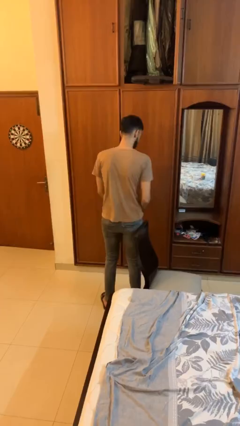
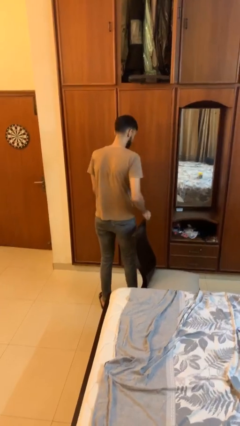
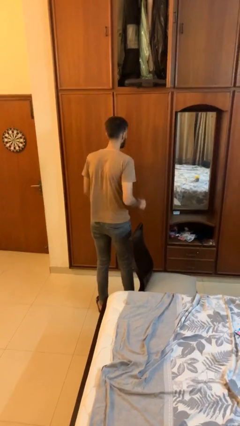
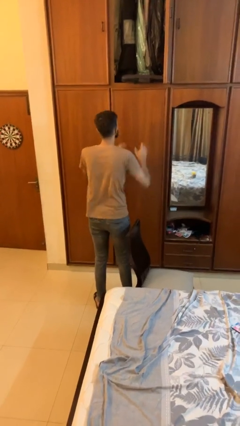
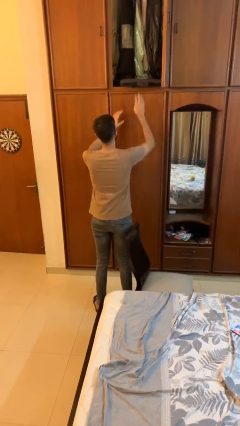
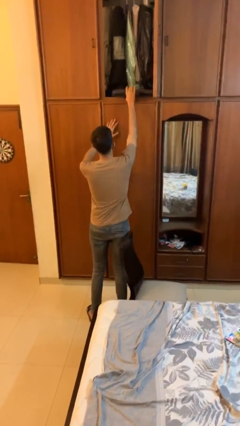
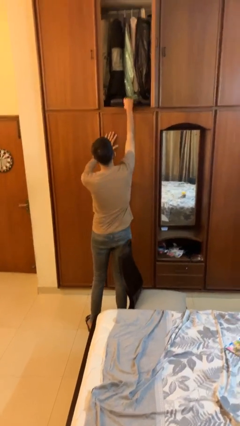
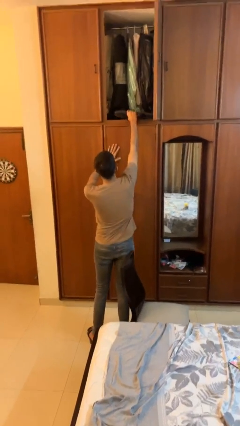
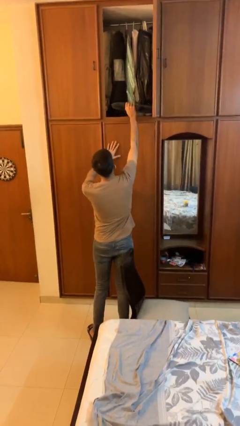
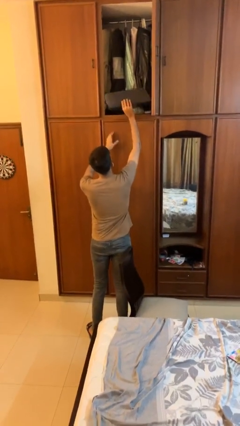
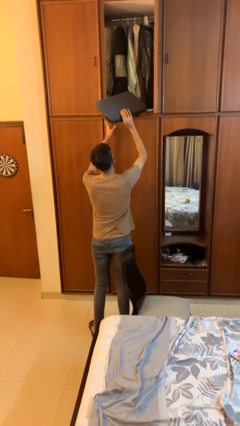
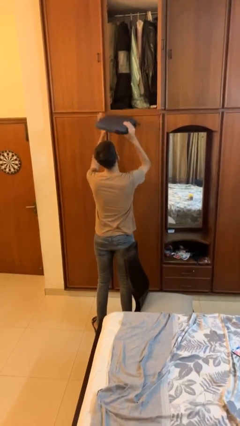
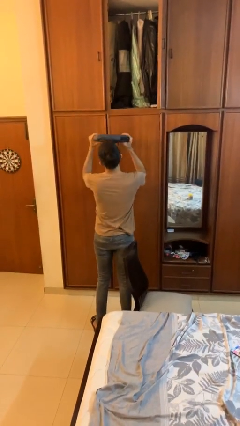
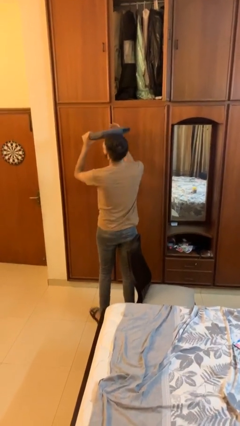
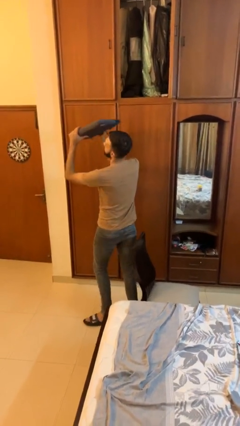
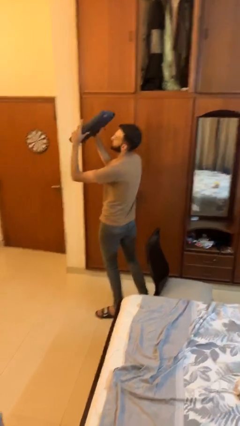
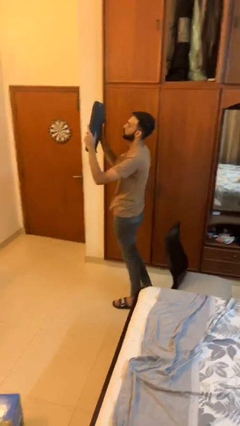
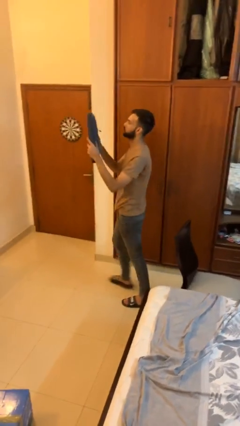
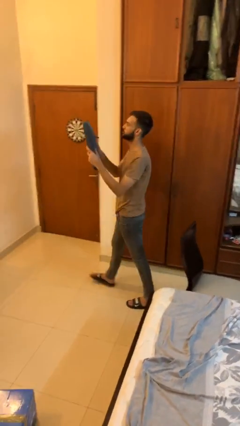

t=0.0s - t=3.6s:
person picks up object from shelf

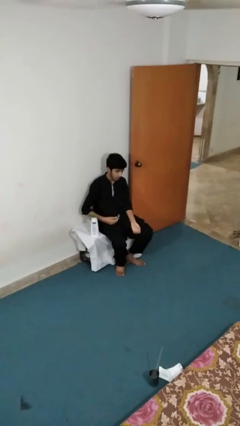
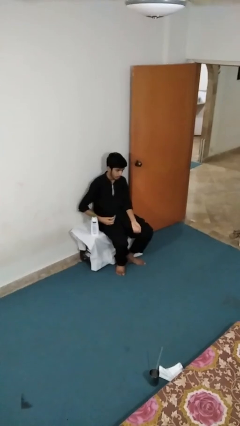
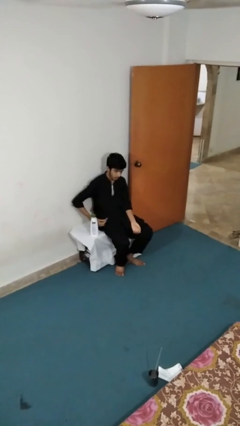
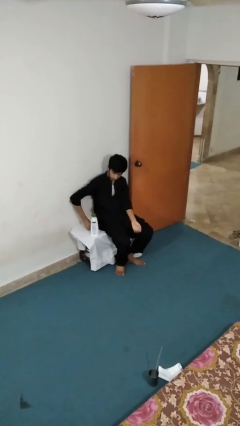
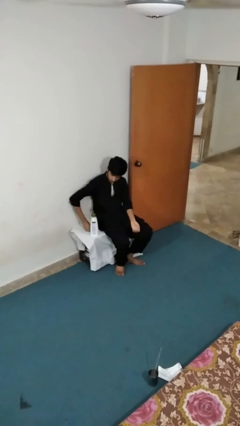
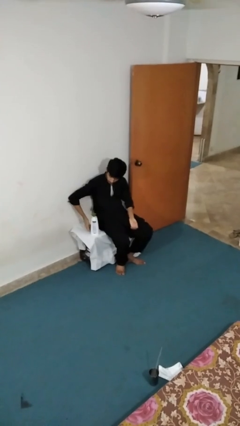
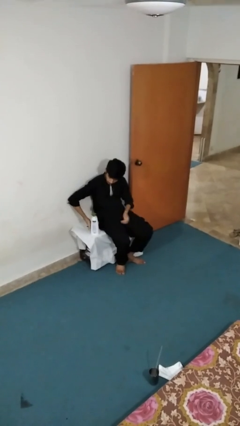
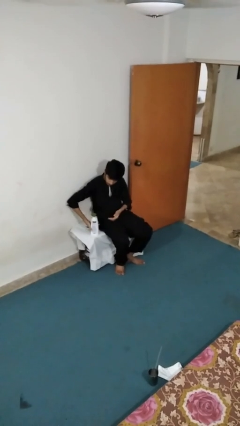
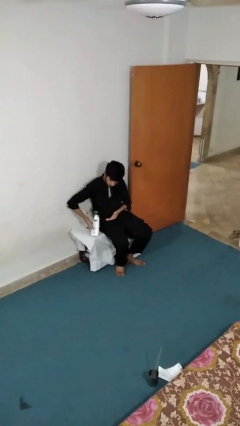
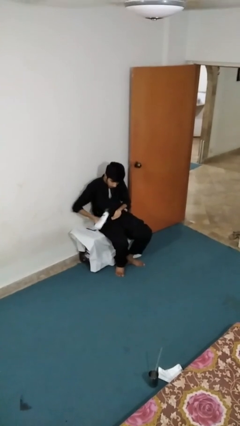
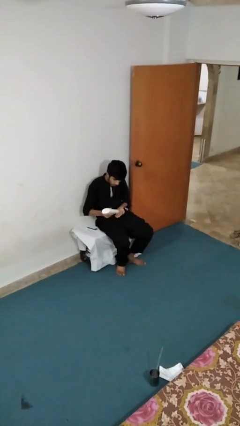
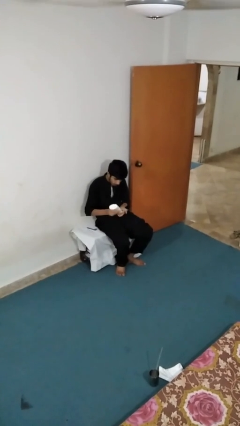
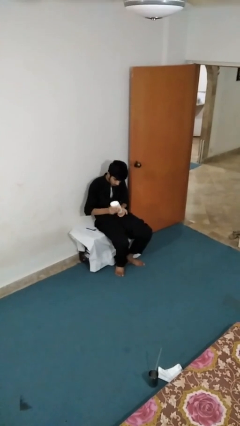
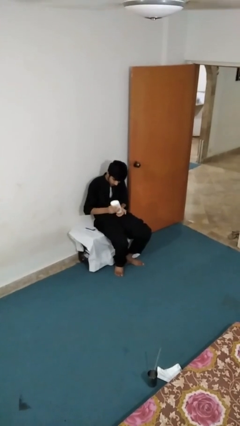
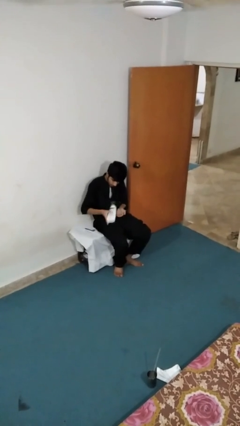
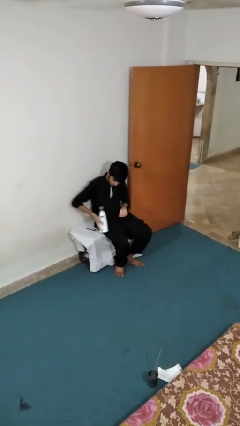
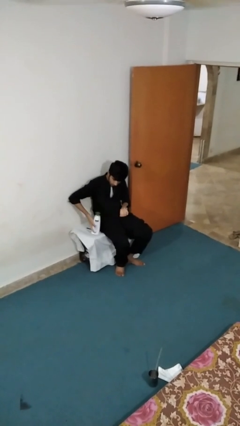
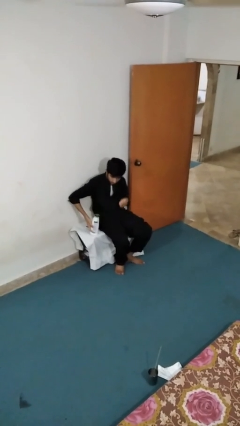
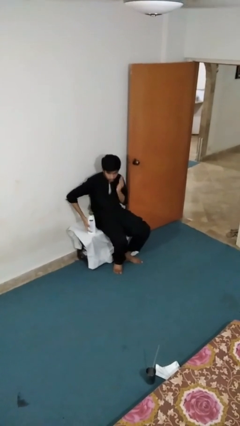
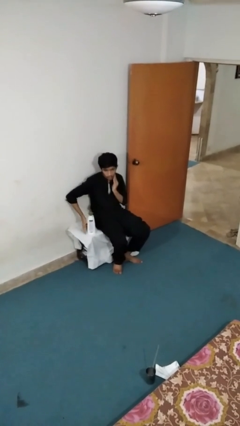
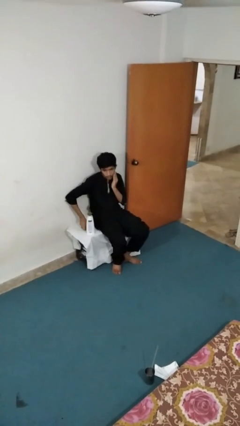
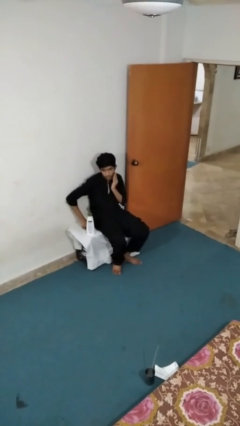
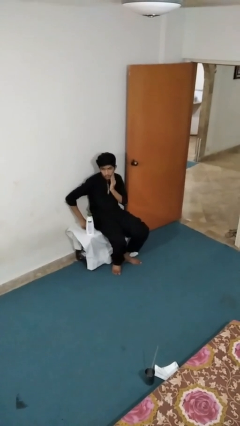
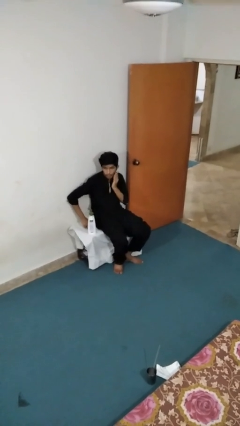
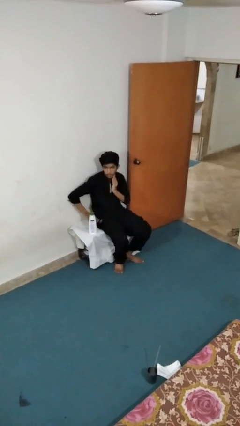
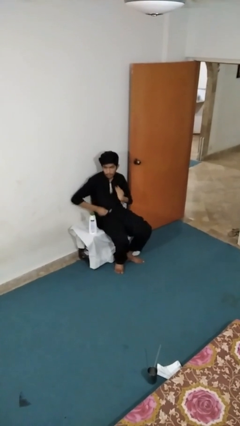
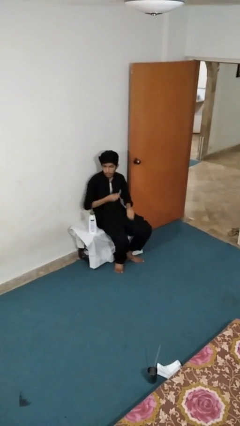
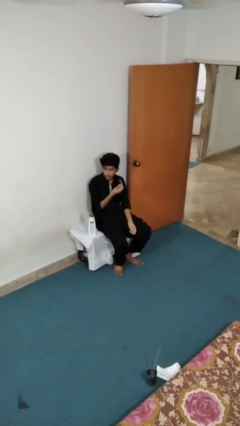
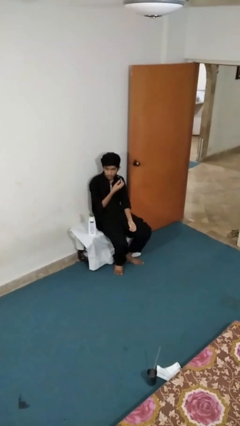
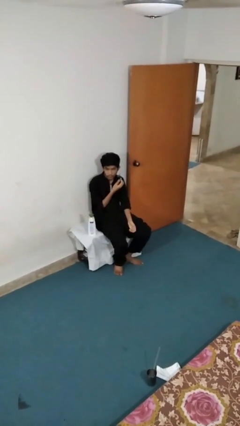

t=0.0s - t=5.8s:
person applies shaving cream

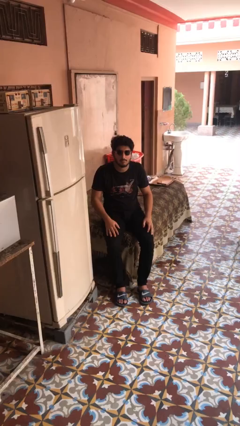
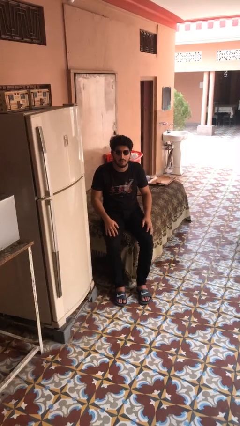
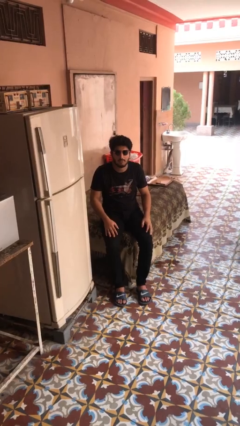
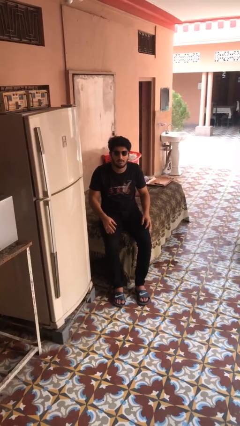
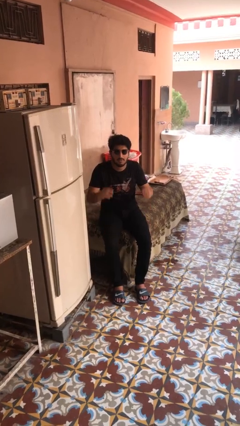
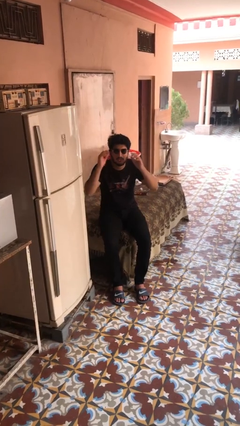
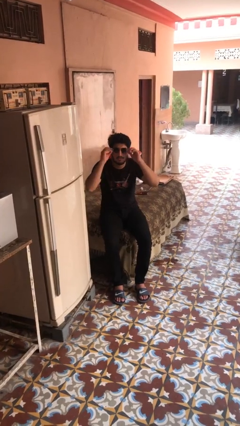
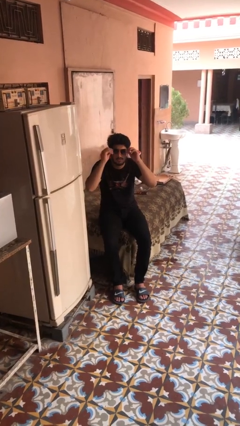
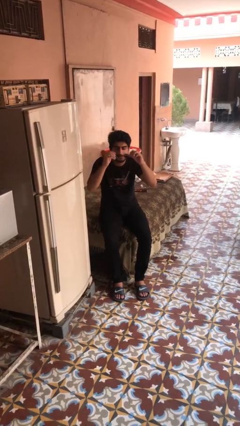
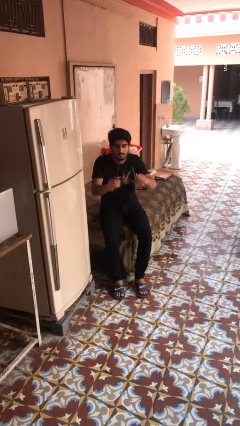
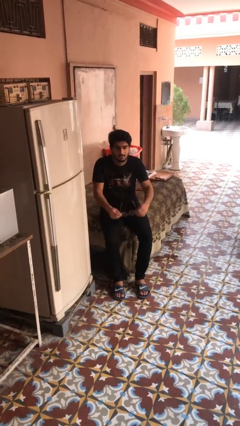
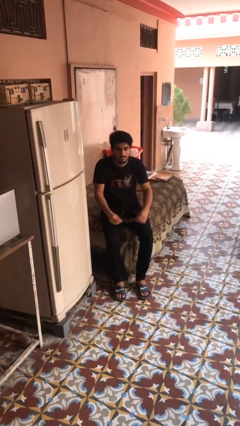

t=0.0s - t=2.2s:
person takes off sunglasses

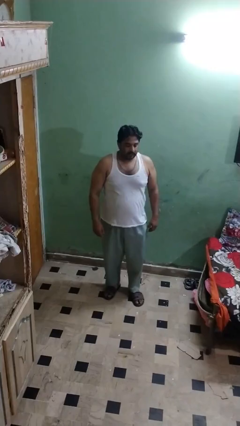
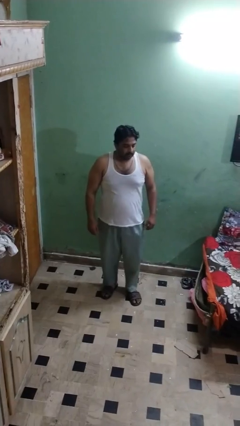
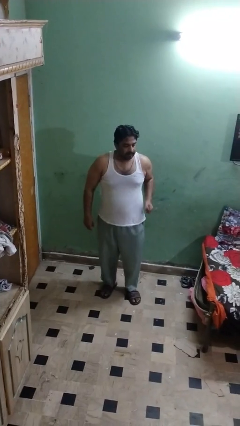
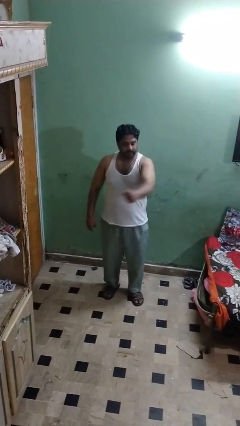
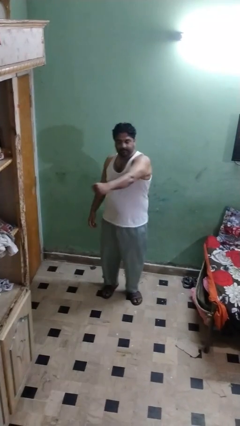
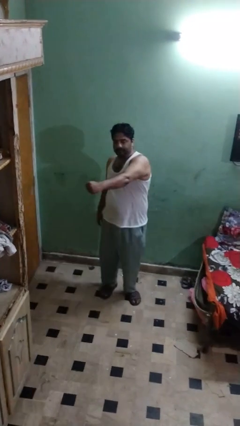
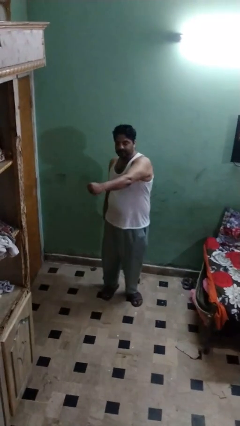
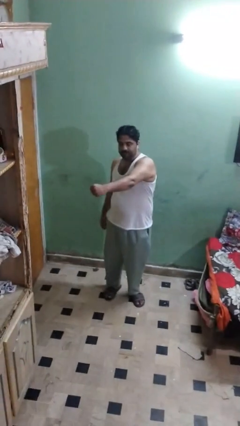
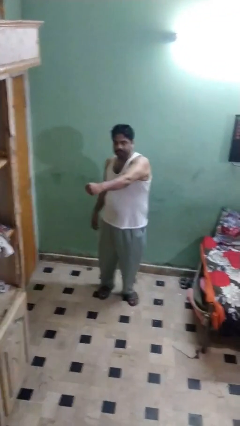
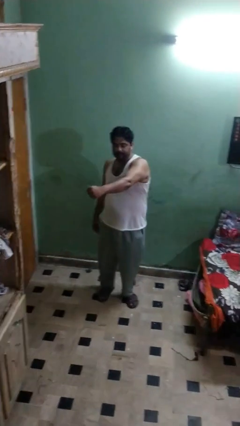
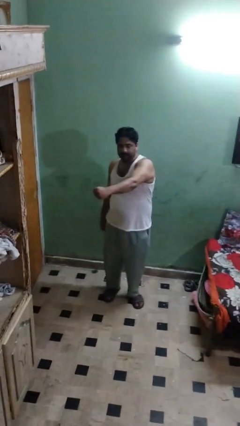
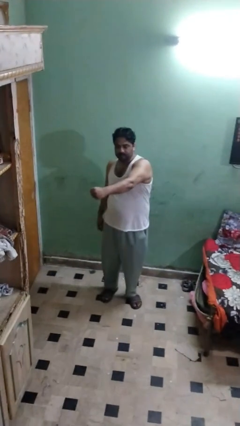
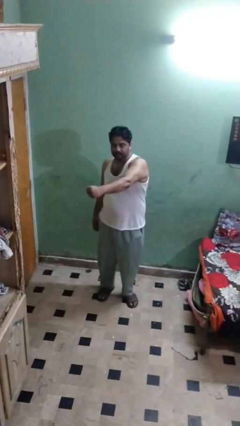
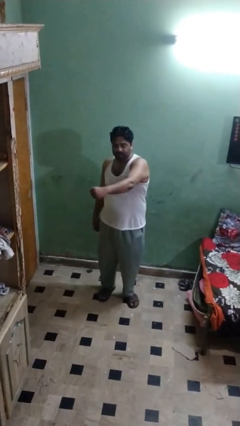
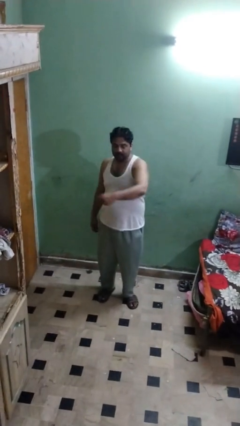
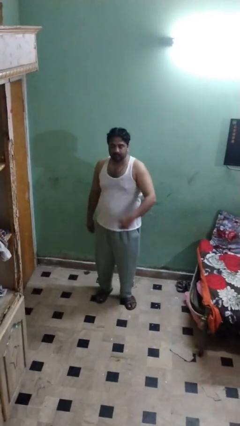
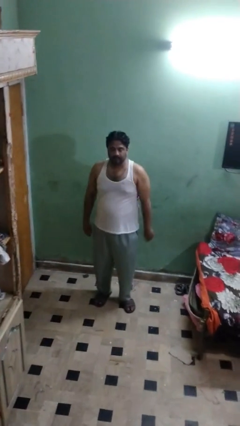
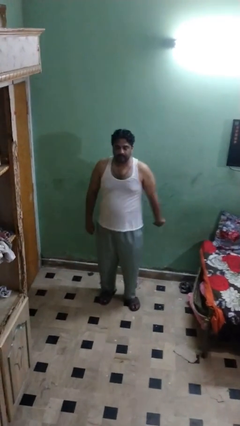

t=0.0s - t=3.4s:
person punches

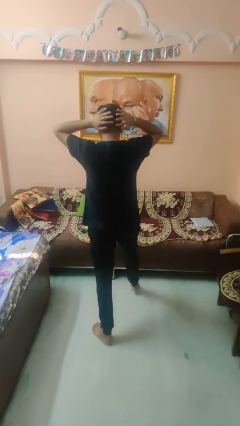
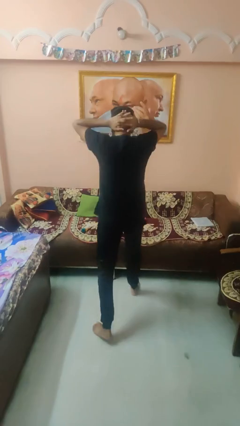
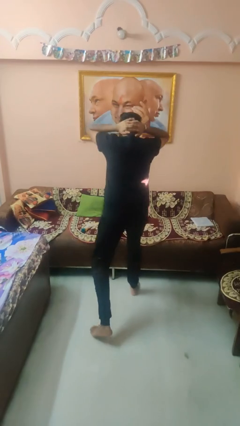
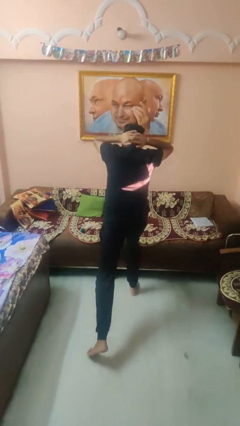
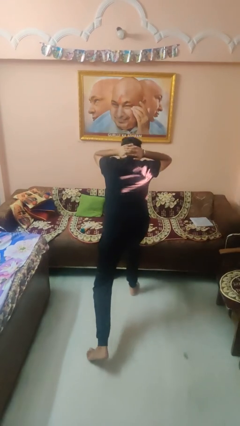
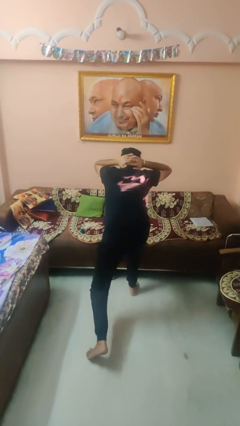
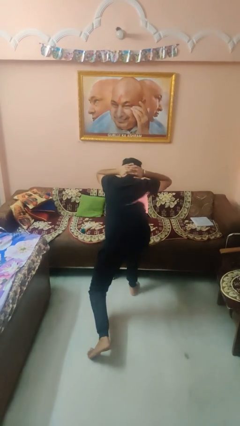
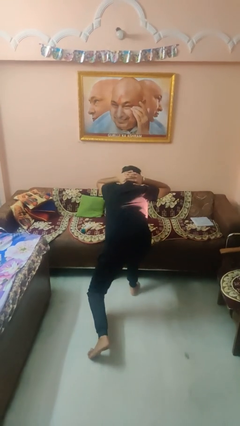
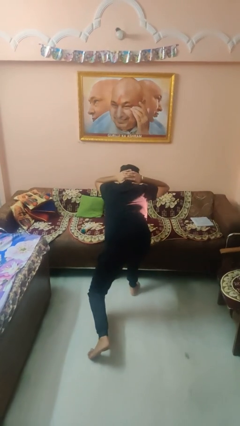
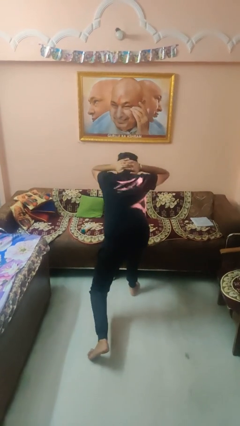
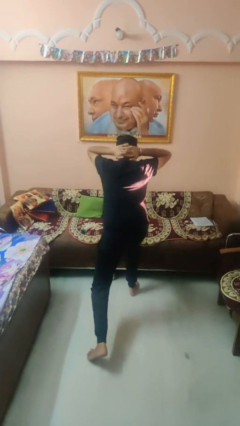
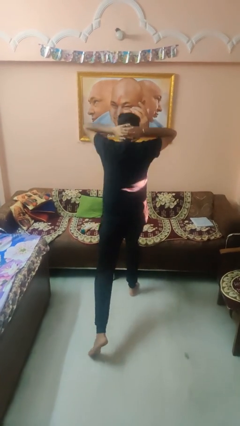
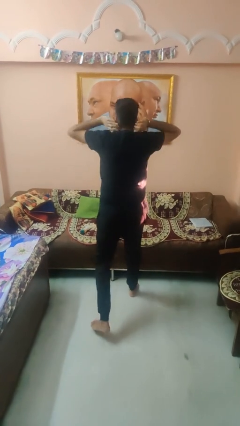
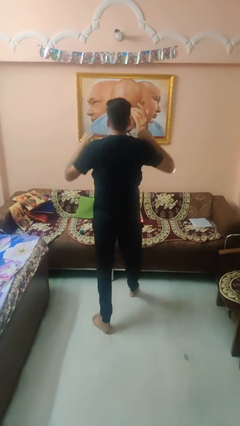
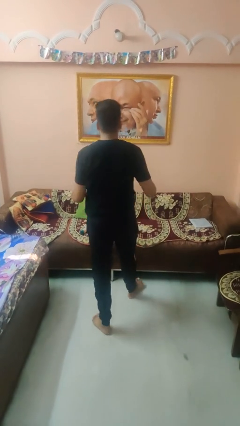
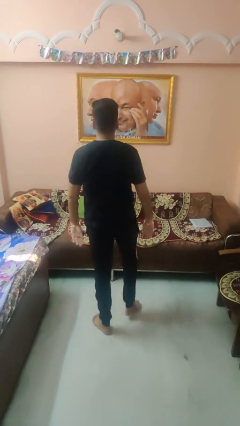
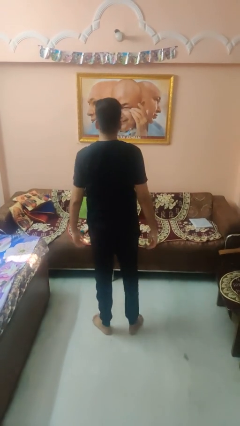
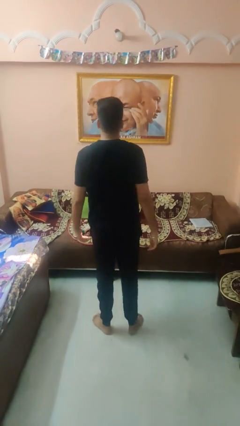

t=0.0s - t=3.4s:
person exercises with lunges
